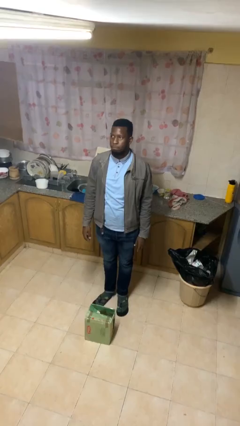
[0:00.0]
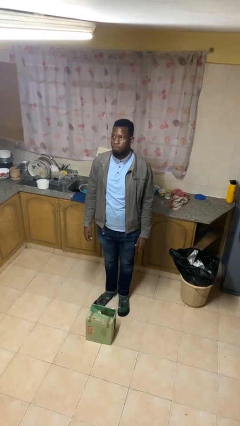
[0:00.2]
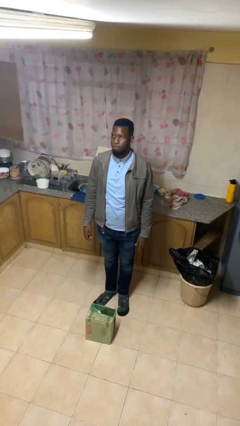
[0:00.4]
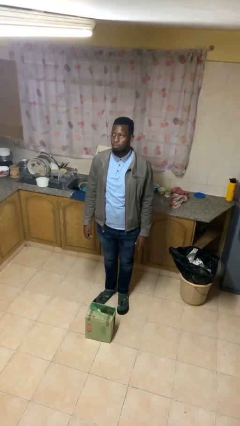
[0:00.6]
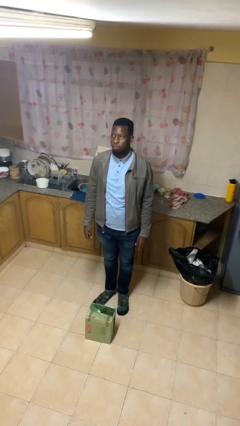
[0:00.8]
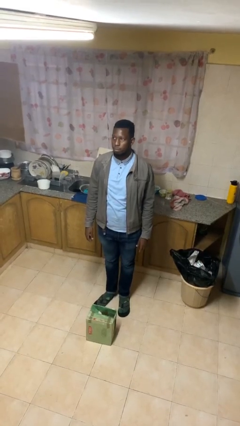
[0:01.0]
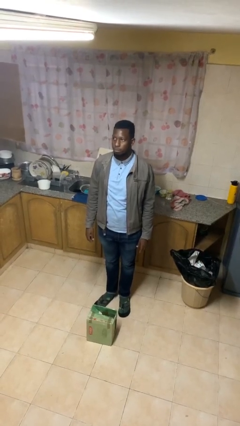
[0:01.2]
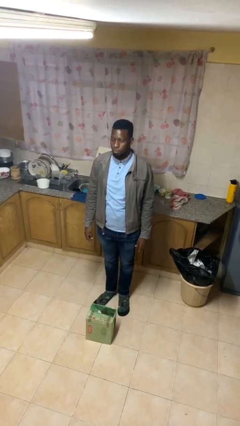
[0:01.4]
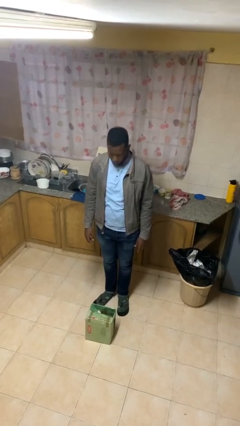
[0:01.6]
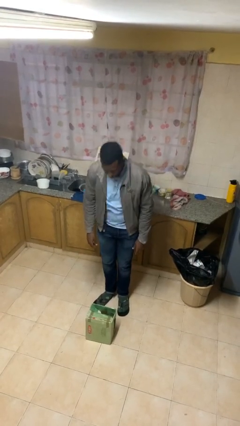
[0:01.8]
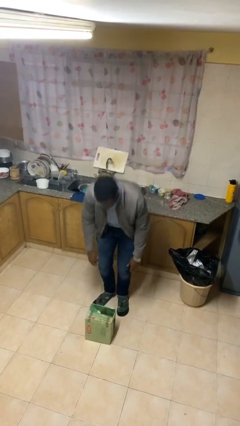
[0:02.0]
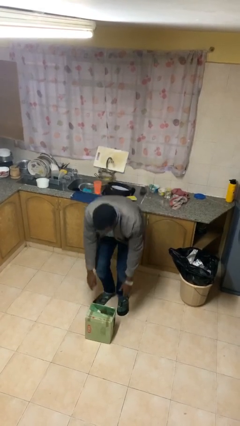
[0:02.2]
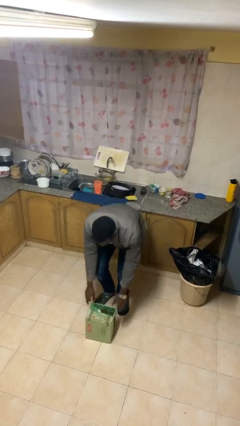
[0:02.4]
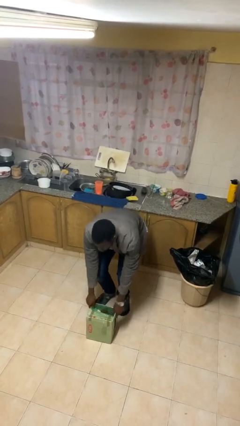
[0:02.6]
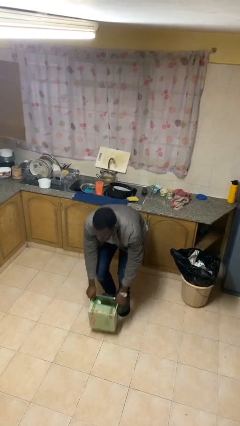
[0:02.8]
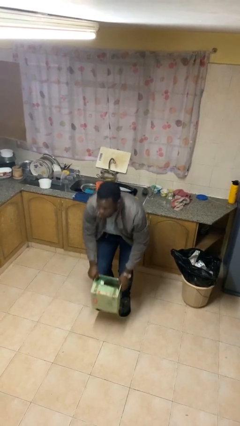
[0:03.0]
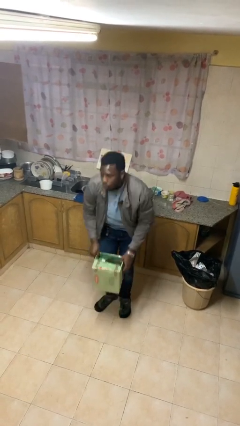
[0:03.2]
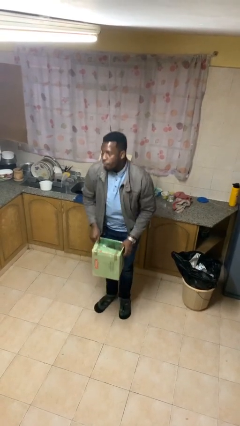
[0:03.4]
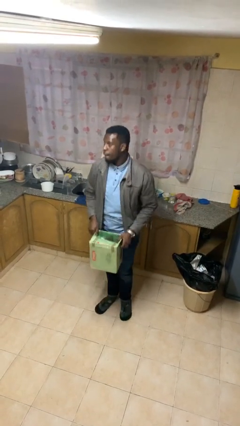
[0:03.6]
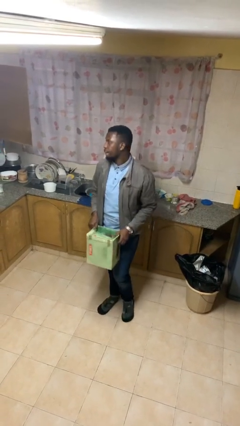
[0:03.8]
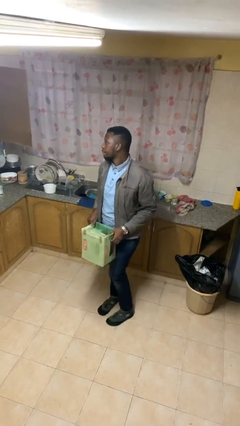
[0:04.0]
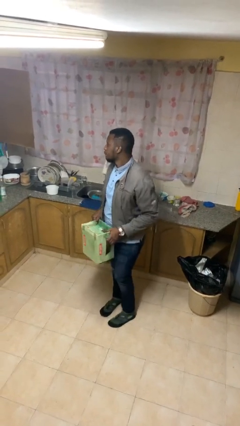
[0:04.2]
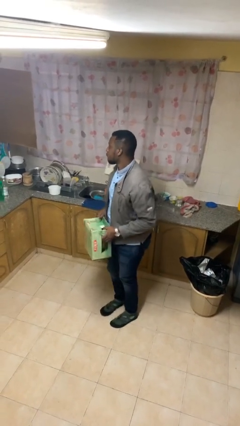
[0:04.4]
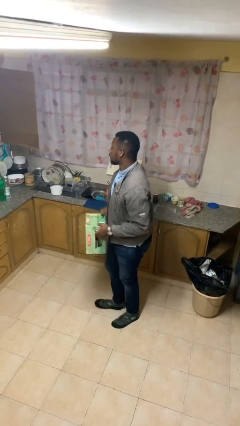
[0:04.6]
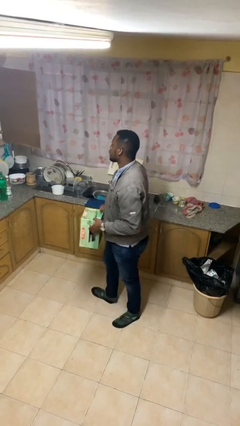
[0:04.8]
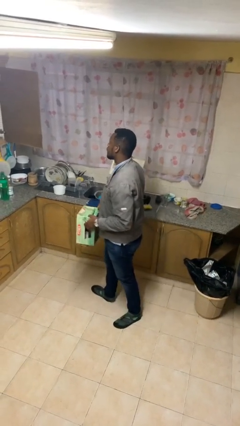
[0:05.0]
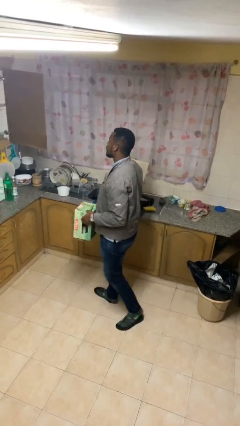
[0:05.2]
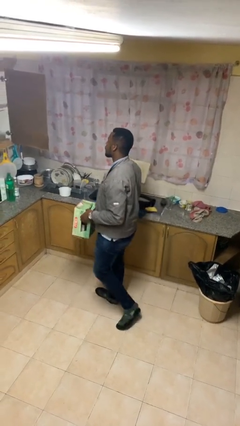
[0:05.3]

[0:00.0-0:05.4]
person picks up object from floor

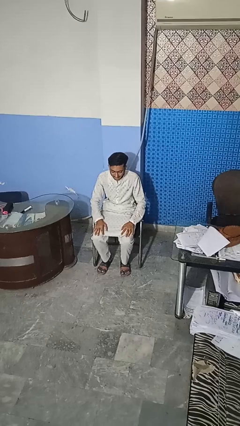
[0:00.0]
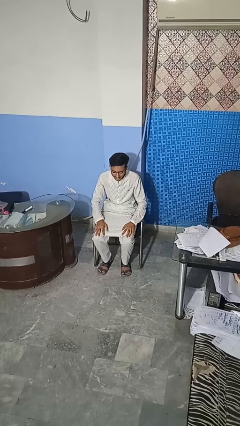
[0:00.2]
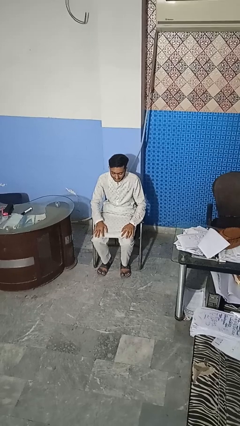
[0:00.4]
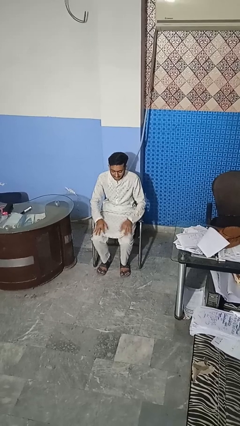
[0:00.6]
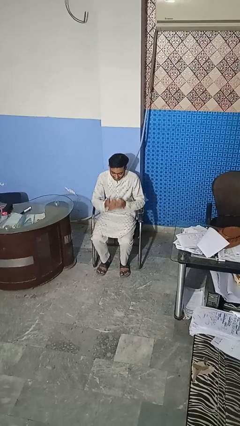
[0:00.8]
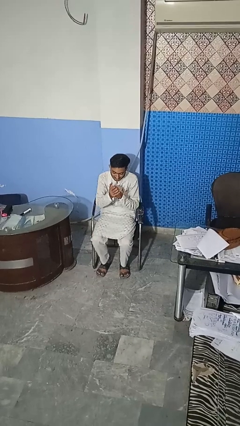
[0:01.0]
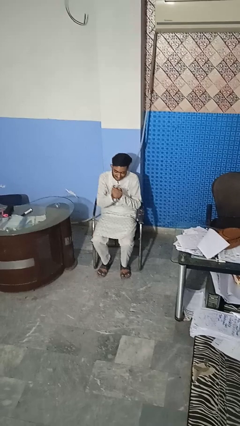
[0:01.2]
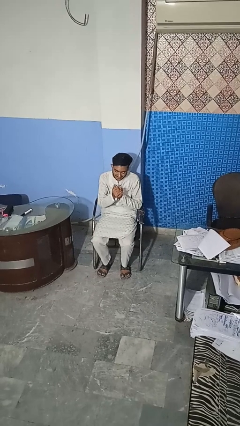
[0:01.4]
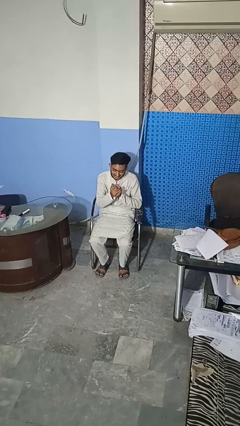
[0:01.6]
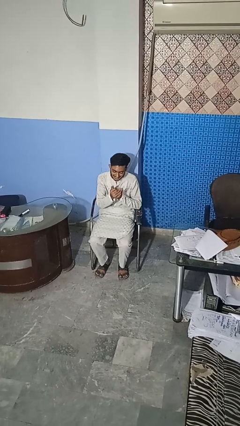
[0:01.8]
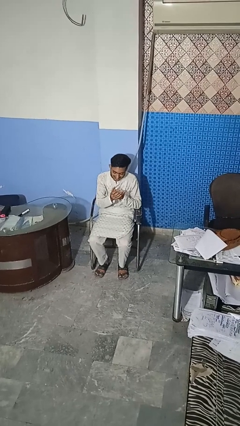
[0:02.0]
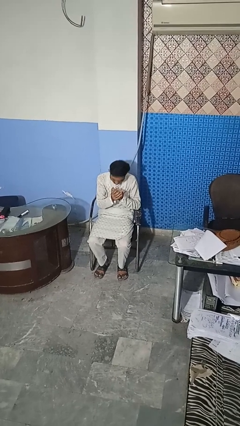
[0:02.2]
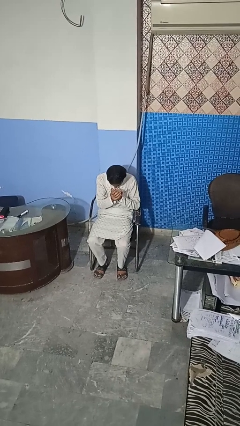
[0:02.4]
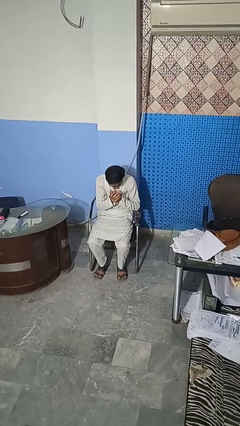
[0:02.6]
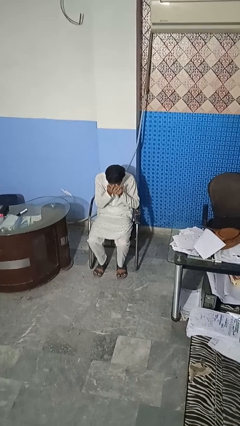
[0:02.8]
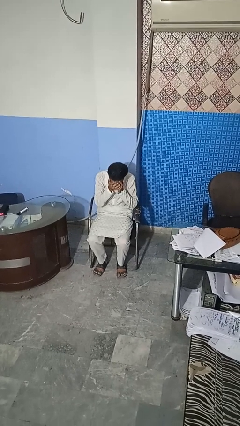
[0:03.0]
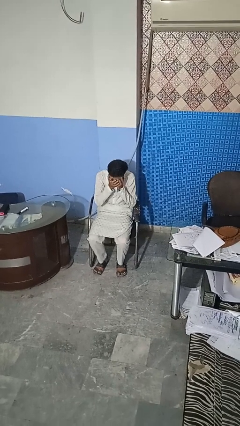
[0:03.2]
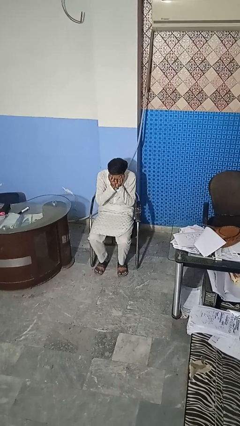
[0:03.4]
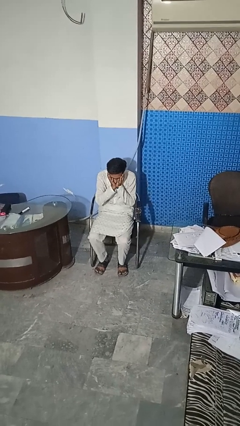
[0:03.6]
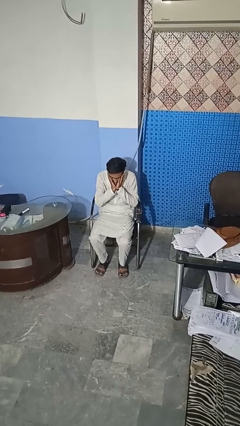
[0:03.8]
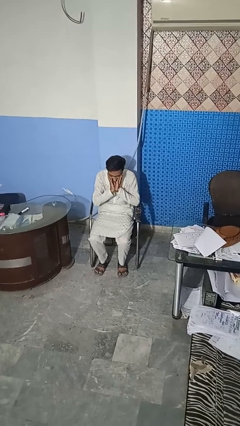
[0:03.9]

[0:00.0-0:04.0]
person prays

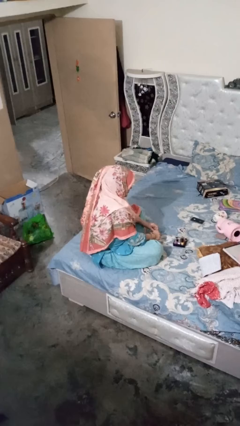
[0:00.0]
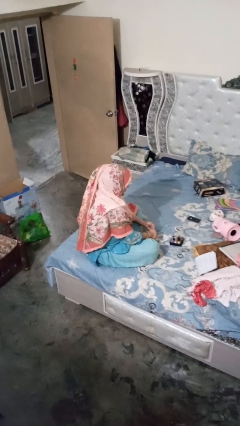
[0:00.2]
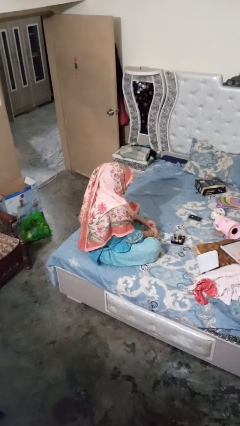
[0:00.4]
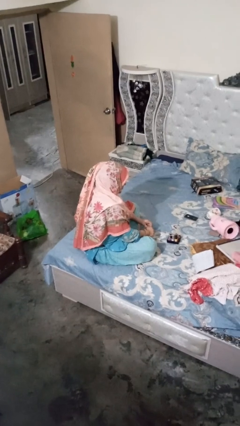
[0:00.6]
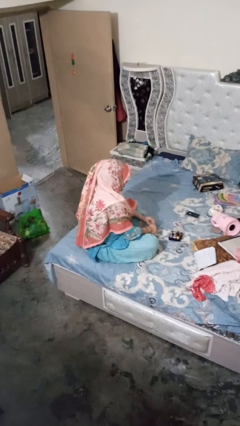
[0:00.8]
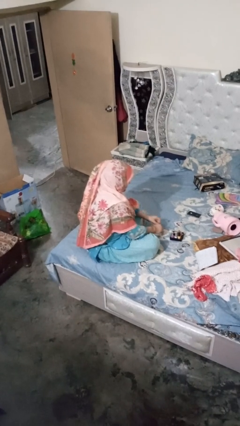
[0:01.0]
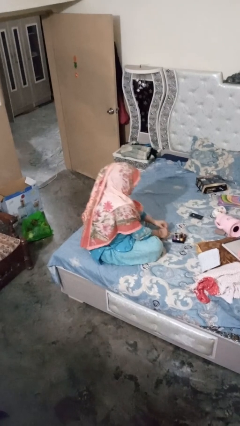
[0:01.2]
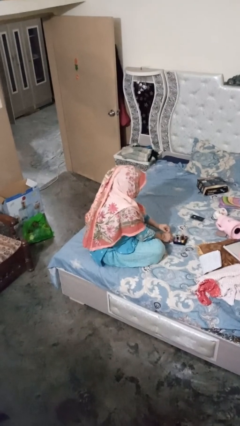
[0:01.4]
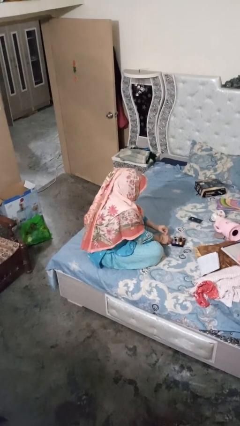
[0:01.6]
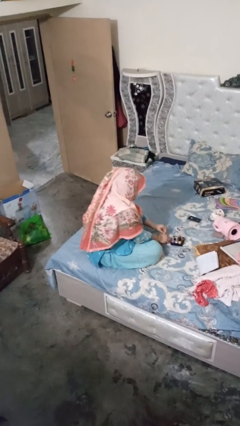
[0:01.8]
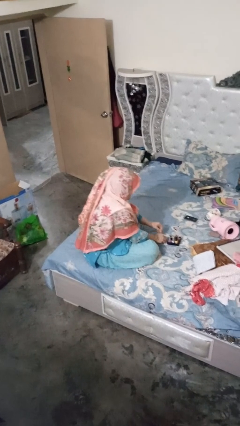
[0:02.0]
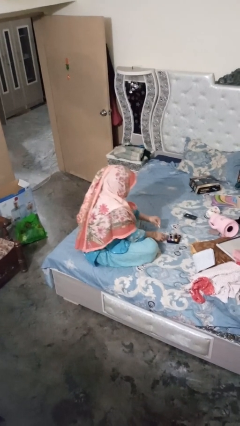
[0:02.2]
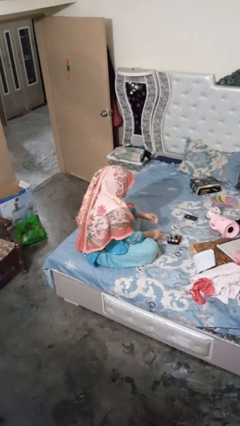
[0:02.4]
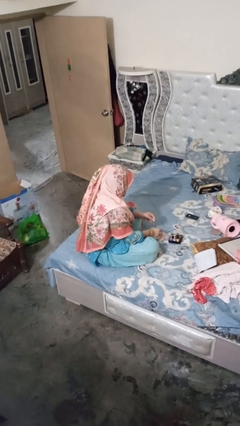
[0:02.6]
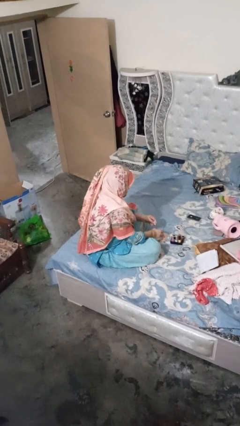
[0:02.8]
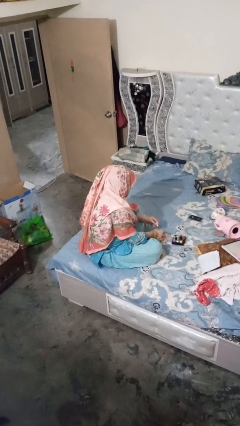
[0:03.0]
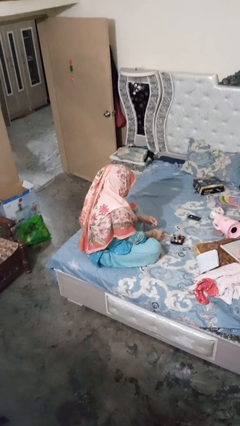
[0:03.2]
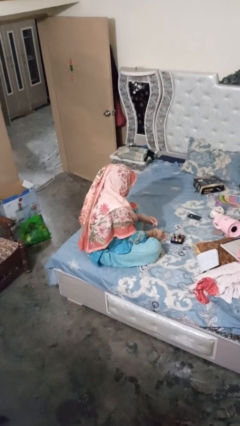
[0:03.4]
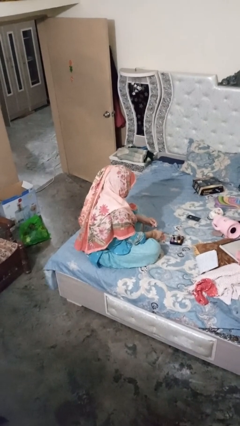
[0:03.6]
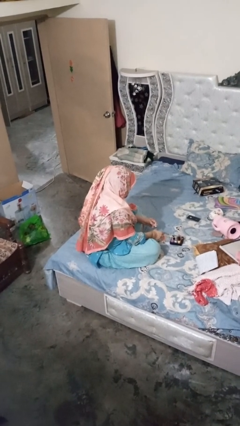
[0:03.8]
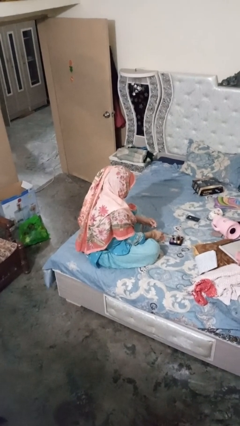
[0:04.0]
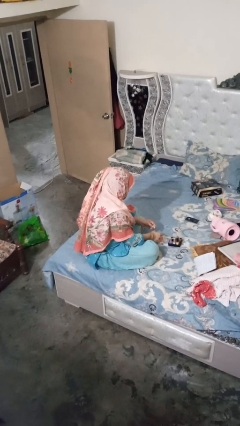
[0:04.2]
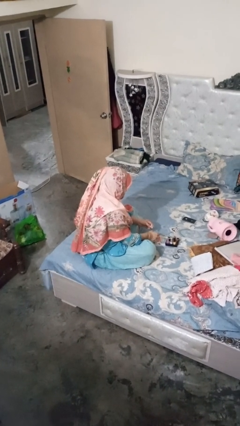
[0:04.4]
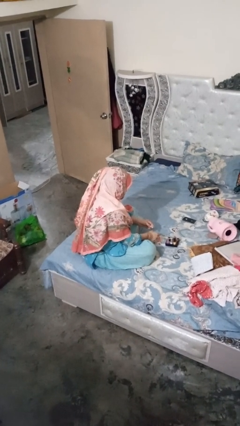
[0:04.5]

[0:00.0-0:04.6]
person paints fingernails

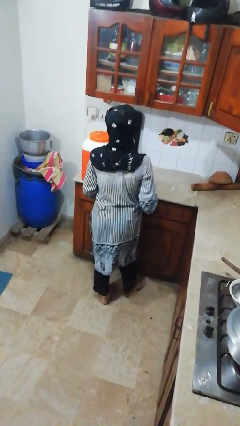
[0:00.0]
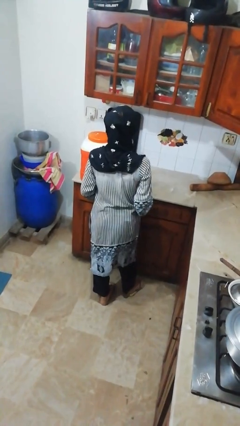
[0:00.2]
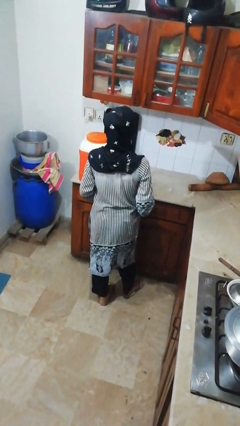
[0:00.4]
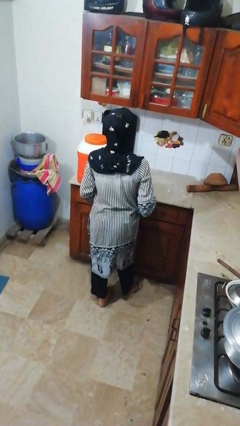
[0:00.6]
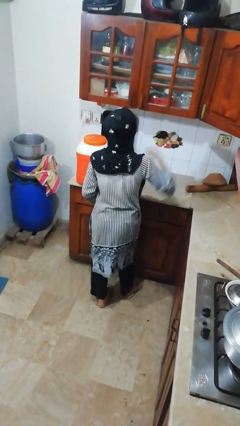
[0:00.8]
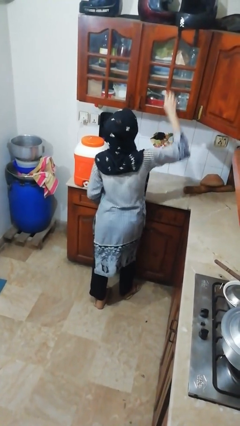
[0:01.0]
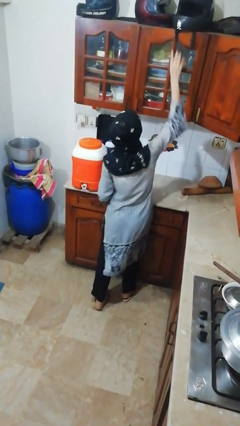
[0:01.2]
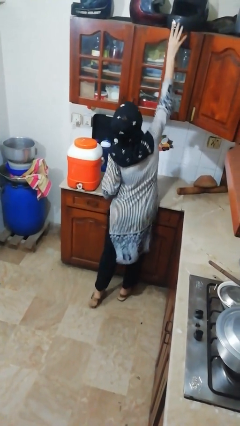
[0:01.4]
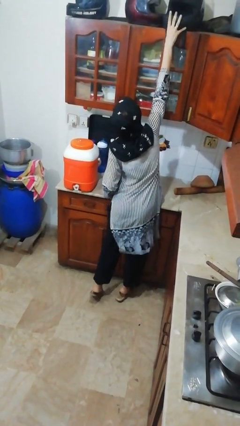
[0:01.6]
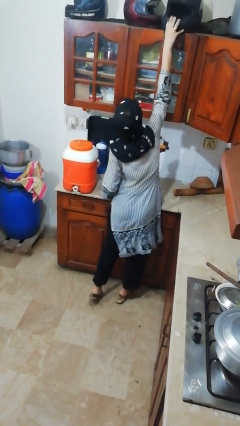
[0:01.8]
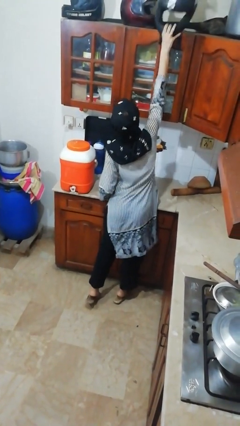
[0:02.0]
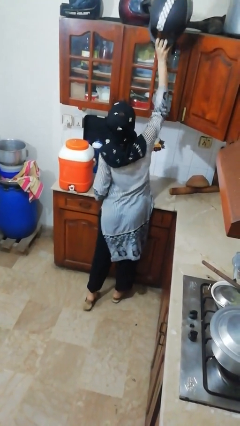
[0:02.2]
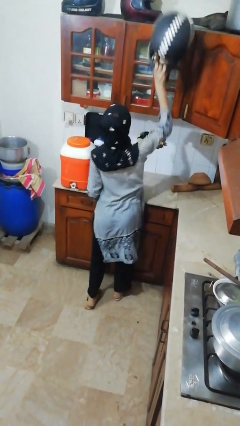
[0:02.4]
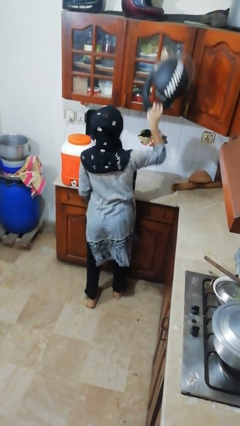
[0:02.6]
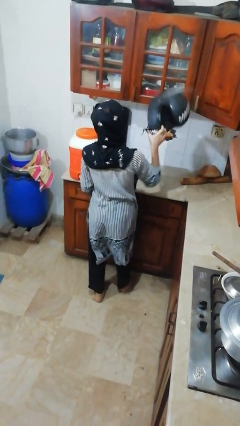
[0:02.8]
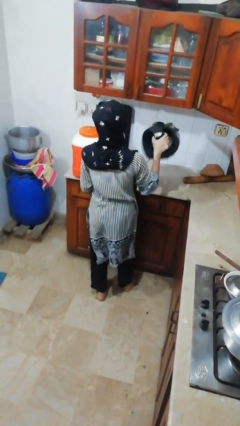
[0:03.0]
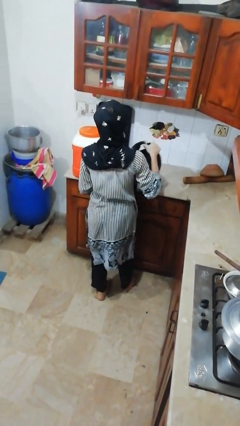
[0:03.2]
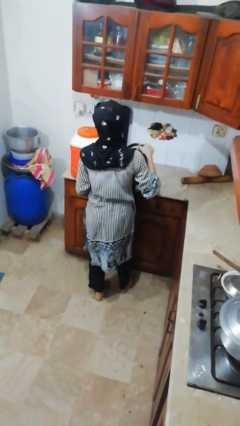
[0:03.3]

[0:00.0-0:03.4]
person picks up object from shelf

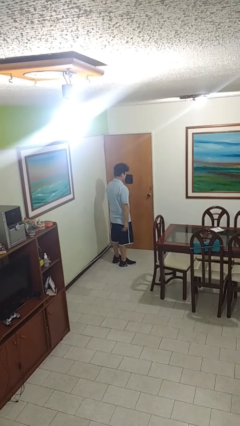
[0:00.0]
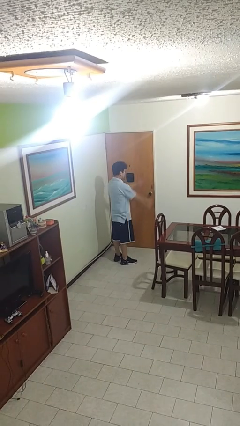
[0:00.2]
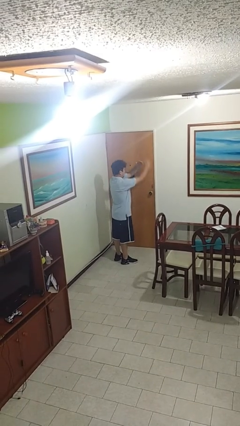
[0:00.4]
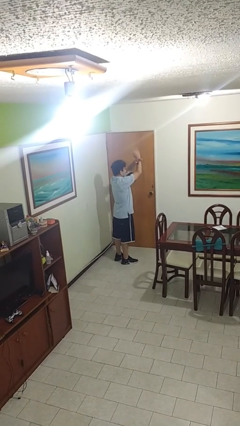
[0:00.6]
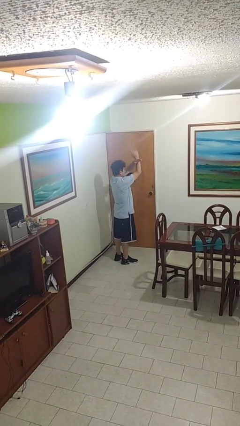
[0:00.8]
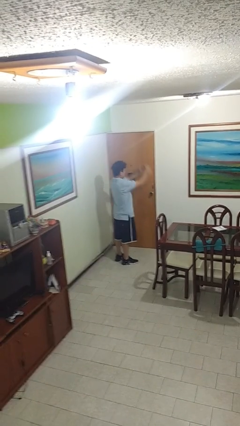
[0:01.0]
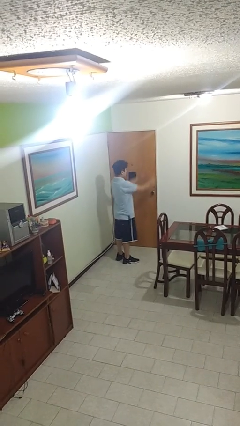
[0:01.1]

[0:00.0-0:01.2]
person gestures arms x
